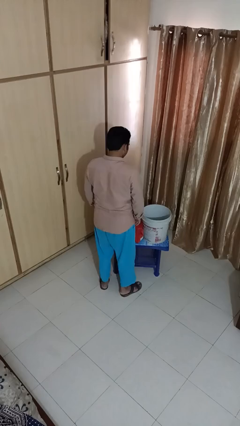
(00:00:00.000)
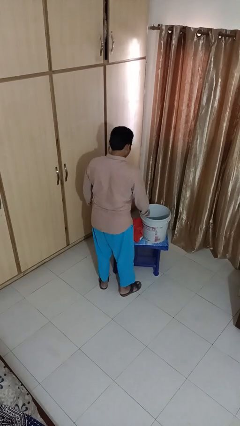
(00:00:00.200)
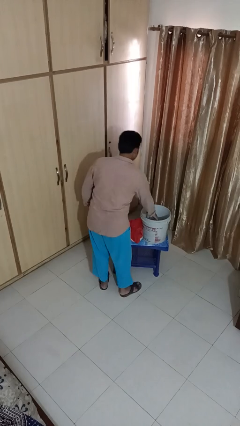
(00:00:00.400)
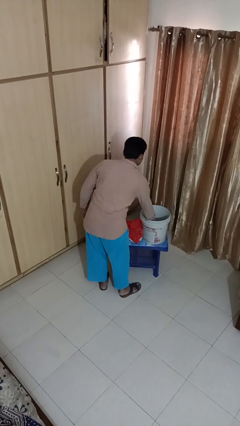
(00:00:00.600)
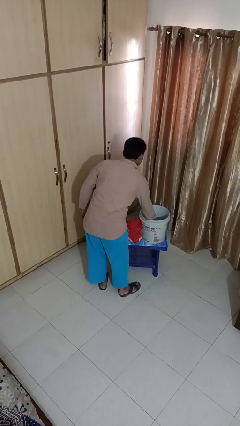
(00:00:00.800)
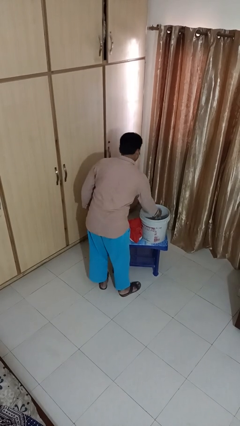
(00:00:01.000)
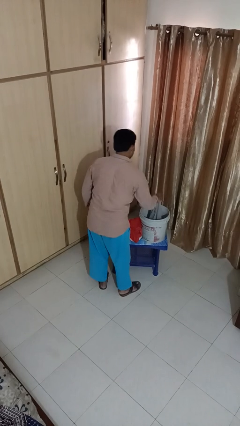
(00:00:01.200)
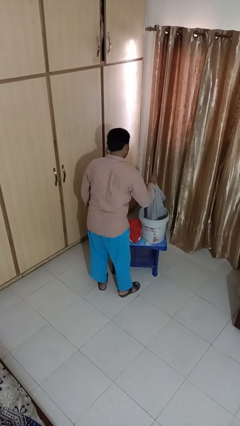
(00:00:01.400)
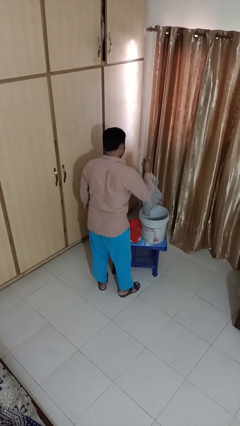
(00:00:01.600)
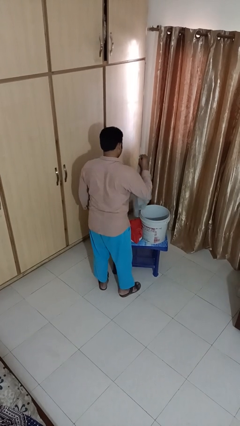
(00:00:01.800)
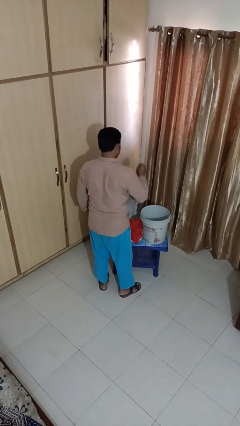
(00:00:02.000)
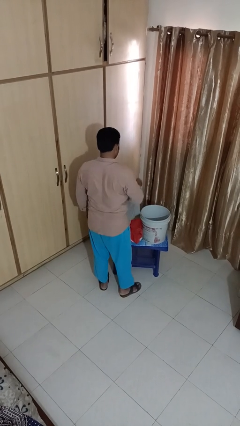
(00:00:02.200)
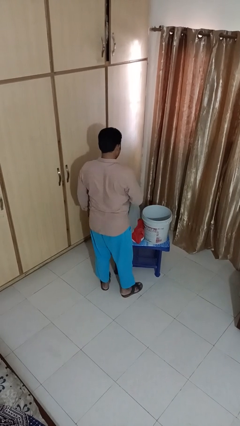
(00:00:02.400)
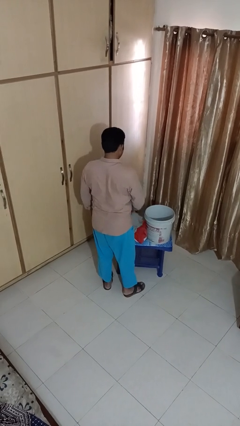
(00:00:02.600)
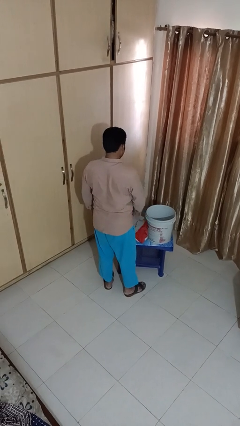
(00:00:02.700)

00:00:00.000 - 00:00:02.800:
person takes object from basket

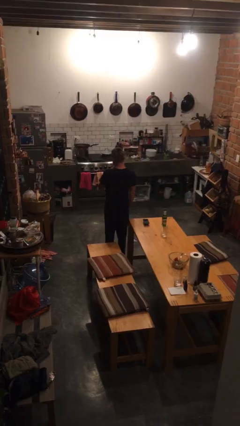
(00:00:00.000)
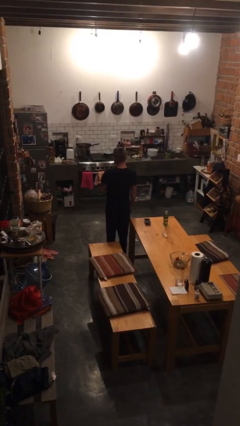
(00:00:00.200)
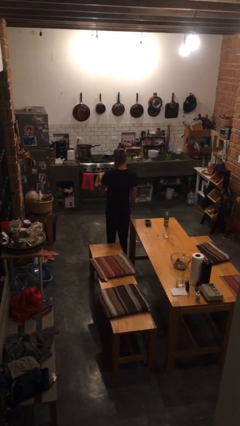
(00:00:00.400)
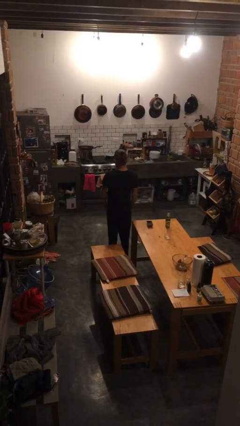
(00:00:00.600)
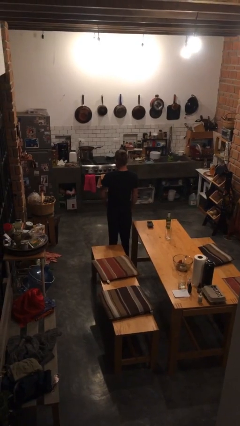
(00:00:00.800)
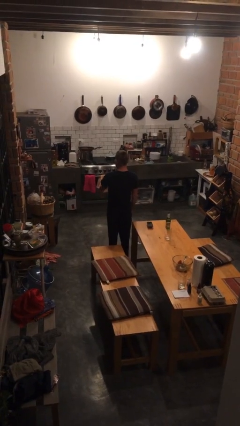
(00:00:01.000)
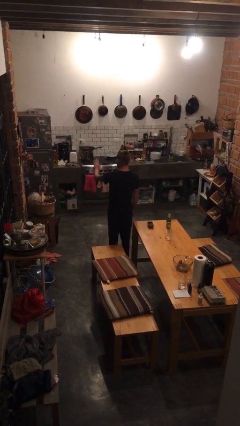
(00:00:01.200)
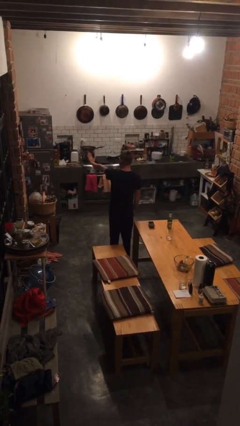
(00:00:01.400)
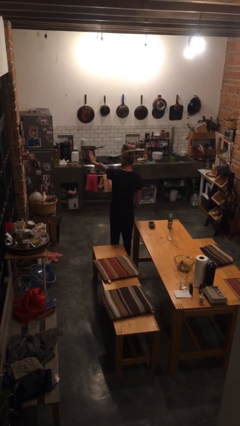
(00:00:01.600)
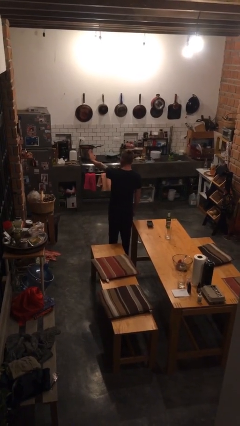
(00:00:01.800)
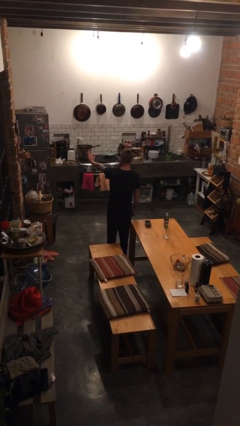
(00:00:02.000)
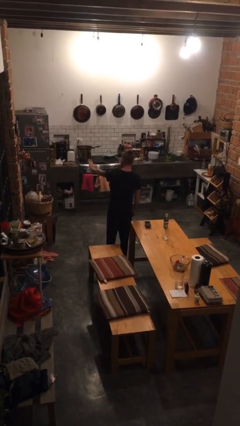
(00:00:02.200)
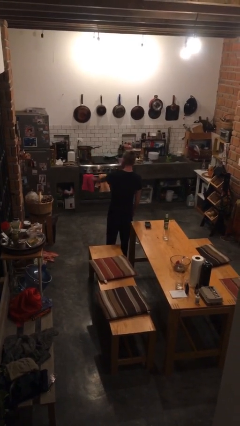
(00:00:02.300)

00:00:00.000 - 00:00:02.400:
person gestures stop

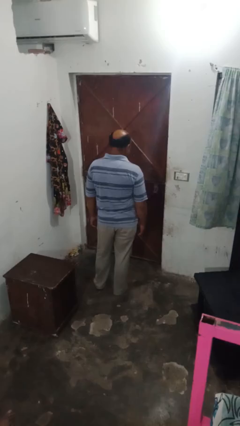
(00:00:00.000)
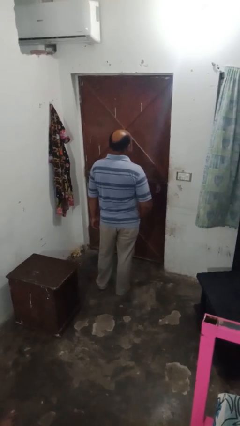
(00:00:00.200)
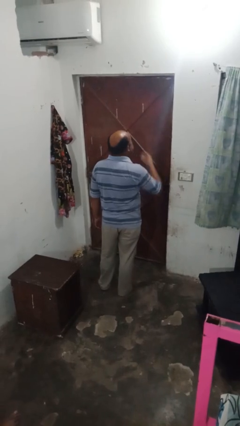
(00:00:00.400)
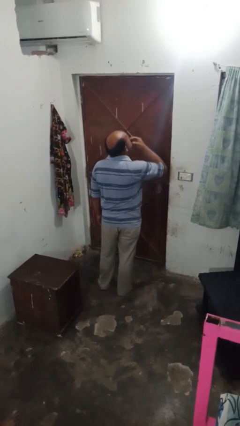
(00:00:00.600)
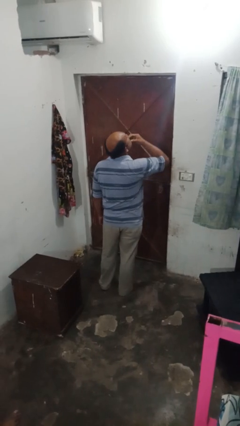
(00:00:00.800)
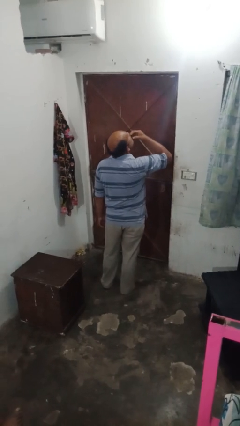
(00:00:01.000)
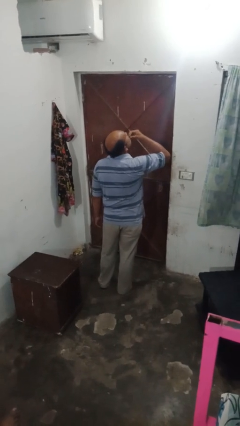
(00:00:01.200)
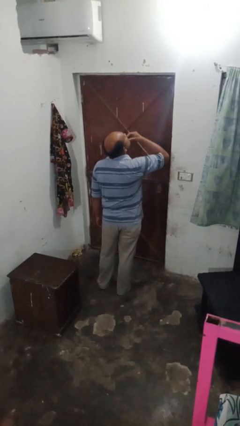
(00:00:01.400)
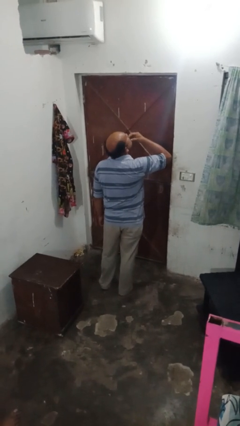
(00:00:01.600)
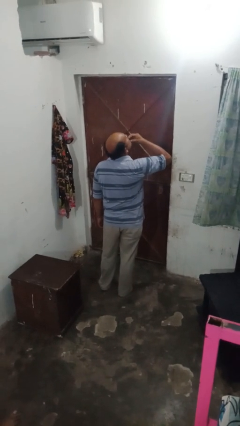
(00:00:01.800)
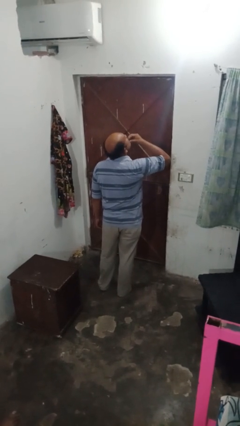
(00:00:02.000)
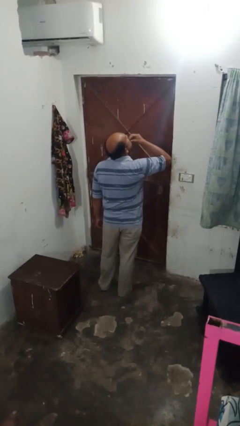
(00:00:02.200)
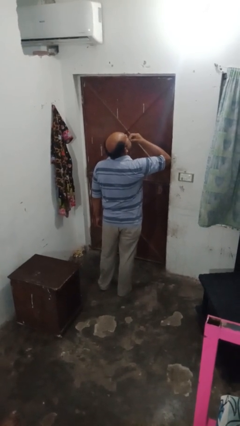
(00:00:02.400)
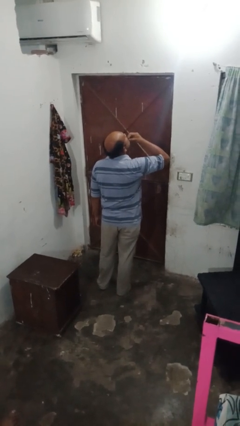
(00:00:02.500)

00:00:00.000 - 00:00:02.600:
person strokes chin

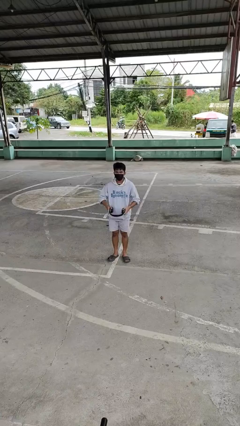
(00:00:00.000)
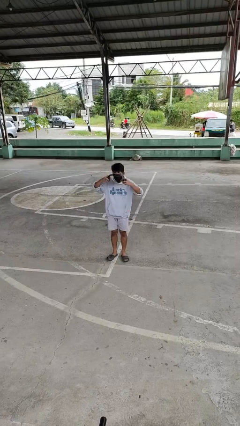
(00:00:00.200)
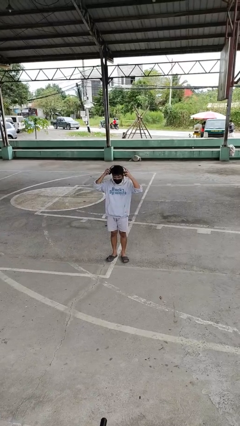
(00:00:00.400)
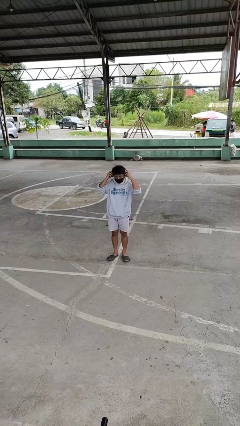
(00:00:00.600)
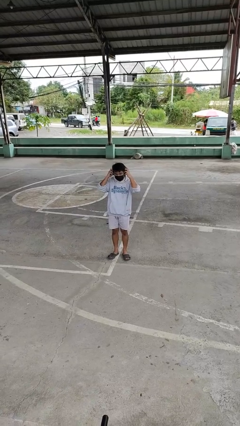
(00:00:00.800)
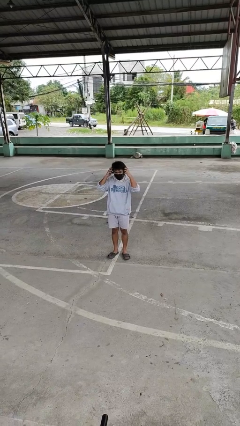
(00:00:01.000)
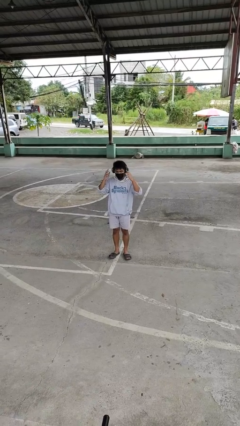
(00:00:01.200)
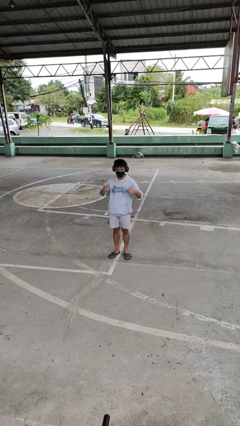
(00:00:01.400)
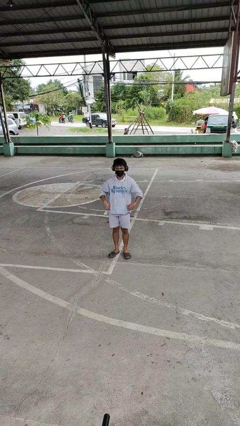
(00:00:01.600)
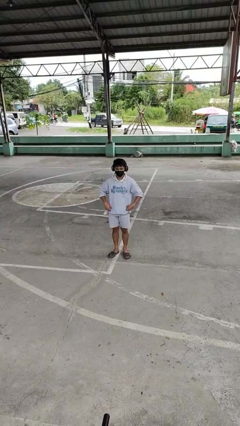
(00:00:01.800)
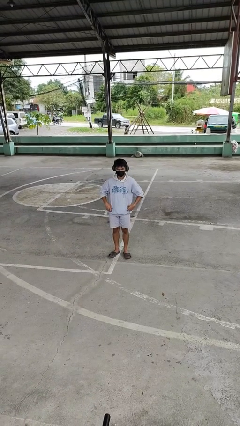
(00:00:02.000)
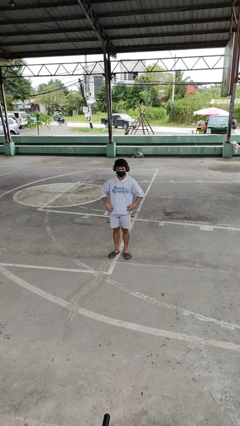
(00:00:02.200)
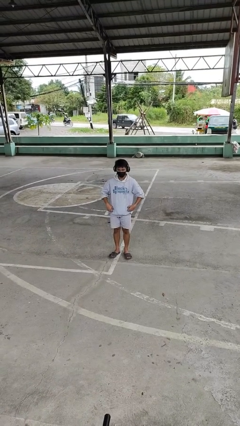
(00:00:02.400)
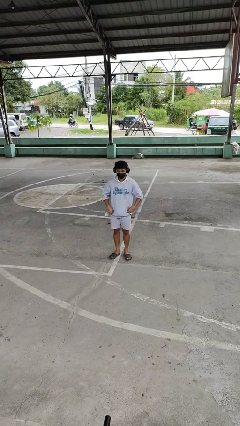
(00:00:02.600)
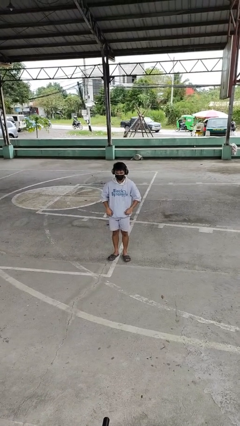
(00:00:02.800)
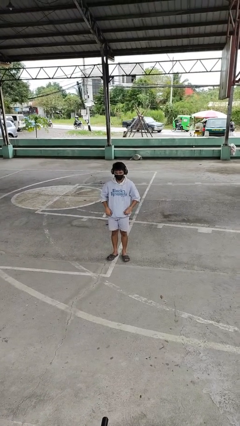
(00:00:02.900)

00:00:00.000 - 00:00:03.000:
person puts on headphones

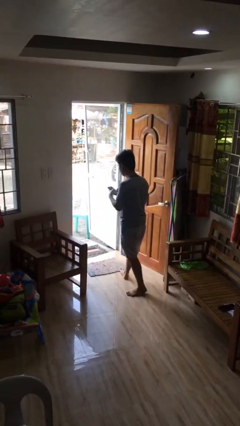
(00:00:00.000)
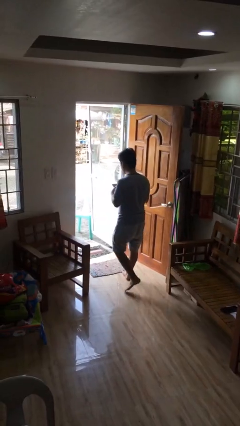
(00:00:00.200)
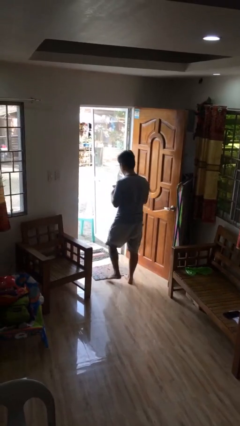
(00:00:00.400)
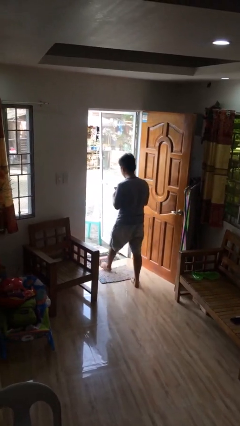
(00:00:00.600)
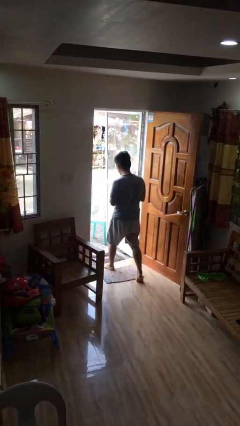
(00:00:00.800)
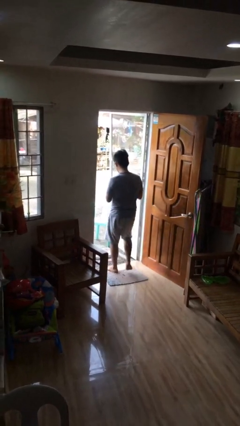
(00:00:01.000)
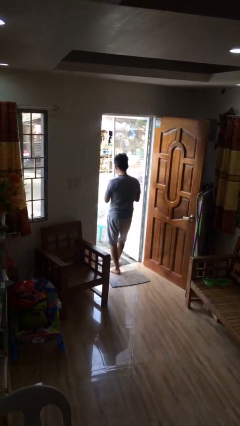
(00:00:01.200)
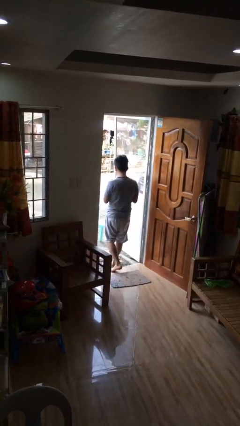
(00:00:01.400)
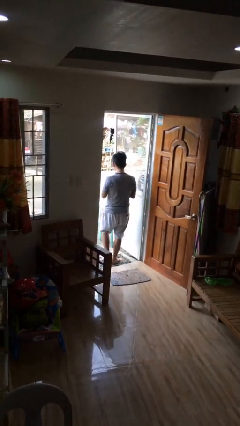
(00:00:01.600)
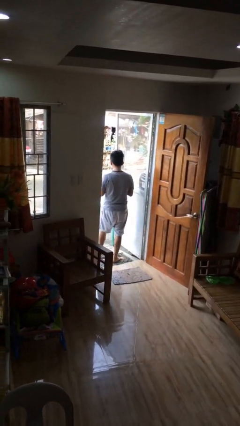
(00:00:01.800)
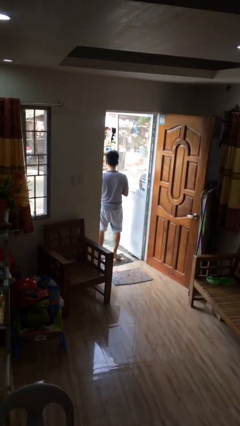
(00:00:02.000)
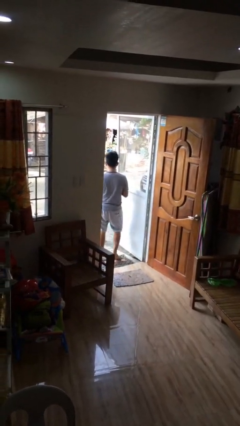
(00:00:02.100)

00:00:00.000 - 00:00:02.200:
person exits scene through structure

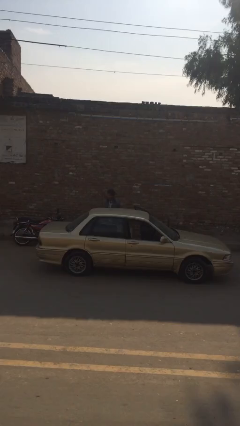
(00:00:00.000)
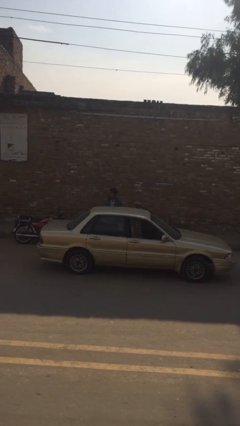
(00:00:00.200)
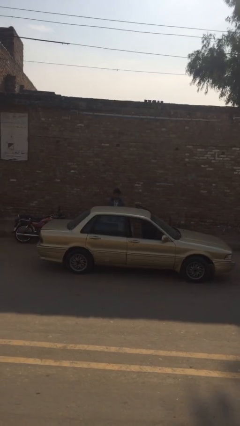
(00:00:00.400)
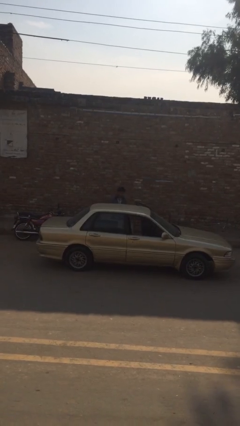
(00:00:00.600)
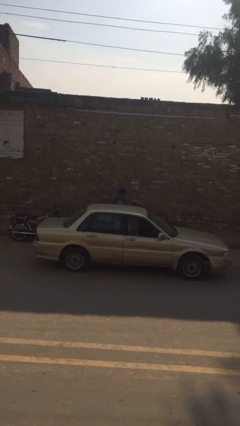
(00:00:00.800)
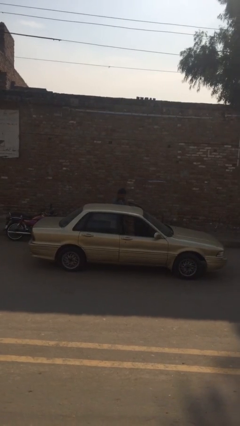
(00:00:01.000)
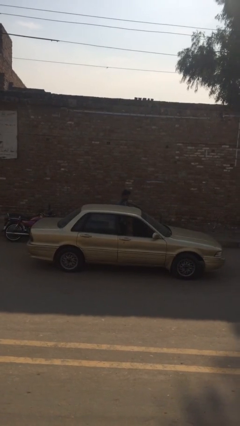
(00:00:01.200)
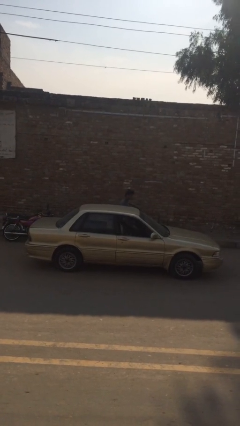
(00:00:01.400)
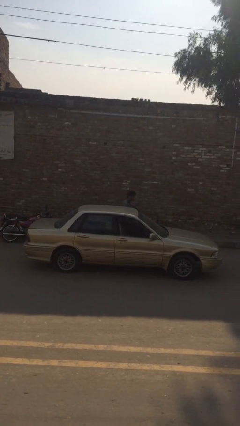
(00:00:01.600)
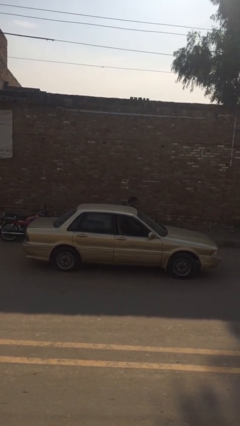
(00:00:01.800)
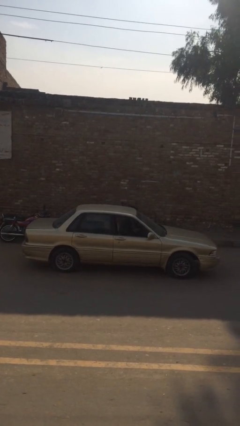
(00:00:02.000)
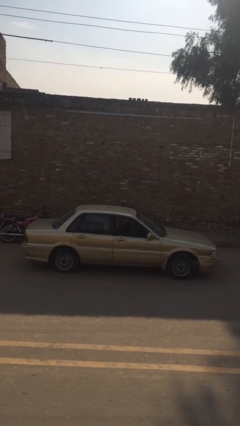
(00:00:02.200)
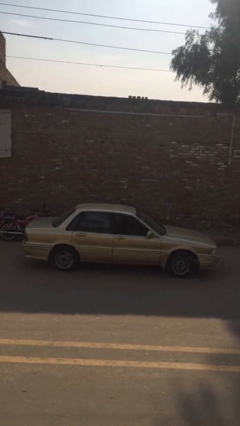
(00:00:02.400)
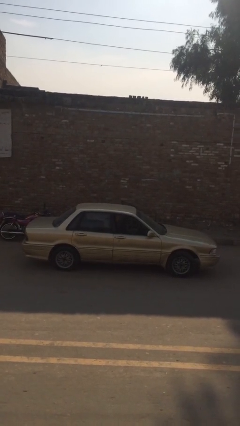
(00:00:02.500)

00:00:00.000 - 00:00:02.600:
person enters car

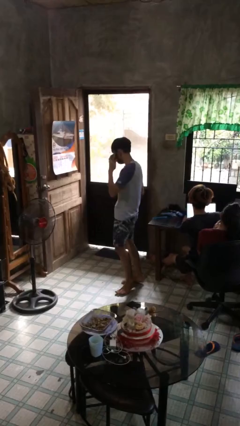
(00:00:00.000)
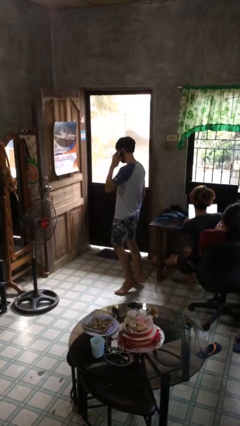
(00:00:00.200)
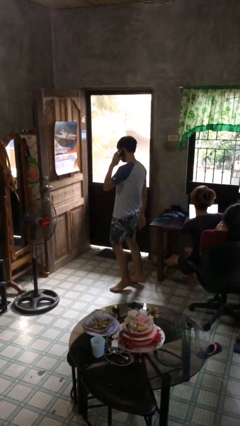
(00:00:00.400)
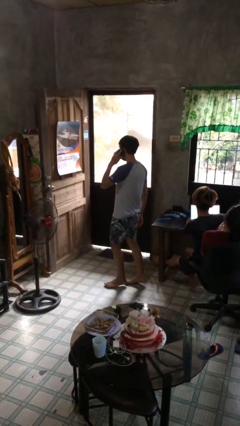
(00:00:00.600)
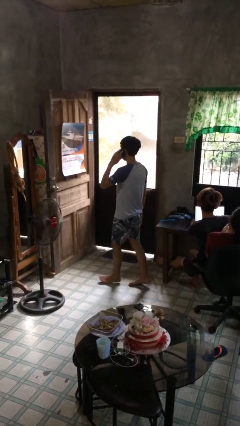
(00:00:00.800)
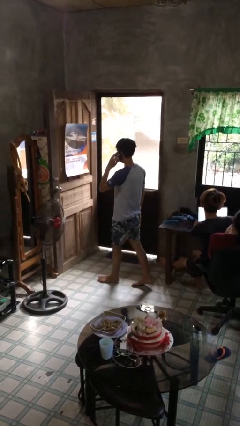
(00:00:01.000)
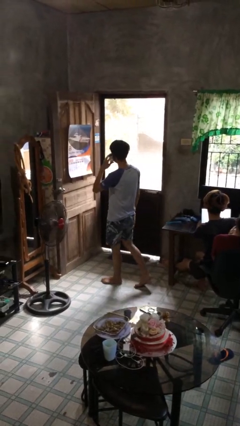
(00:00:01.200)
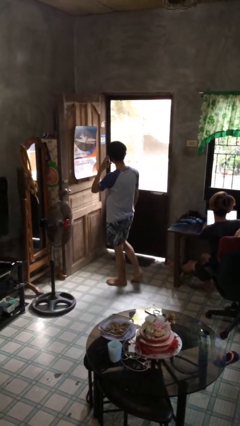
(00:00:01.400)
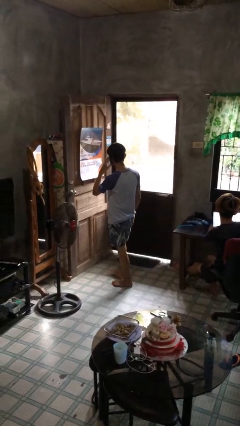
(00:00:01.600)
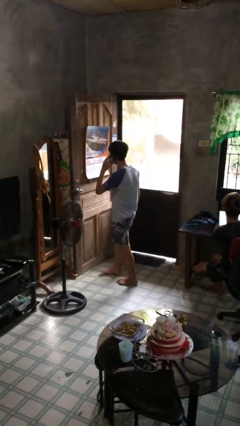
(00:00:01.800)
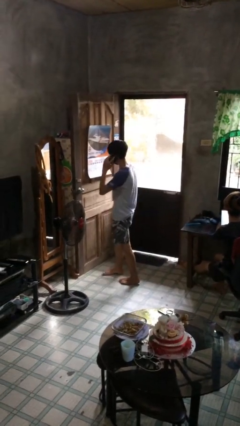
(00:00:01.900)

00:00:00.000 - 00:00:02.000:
person talks on phone
